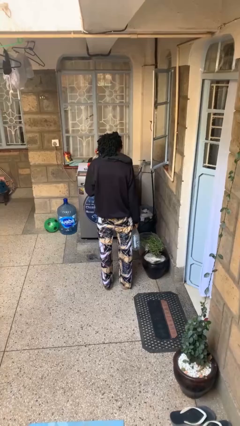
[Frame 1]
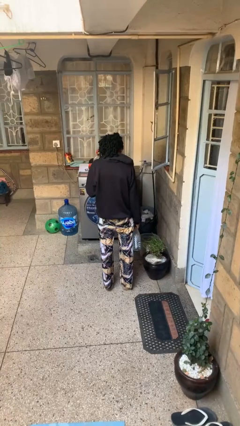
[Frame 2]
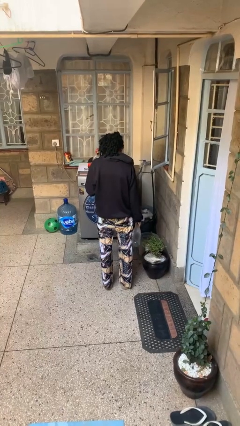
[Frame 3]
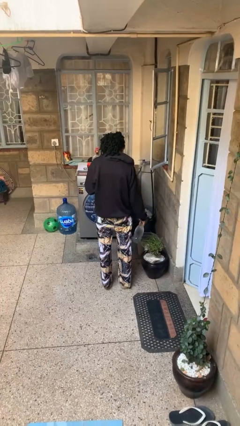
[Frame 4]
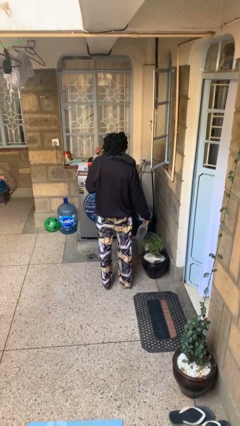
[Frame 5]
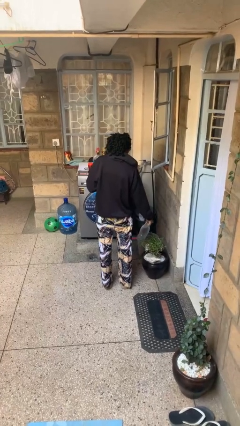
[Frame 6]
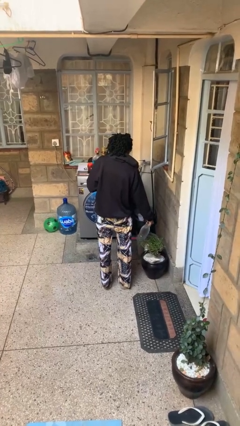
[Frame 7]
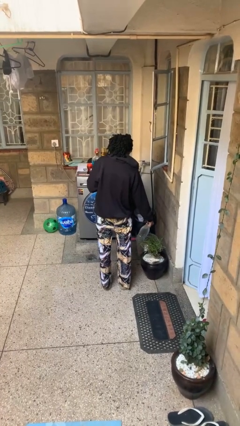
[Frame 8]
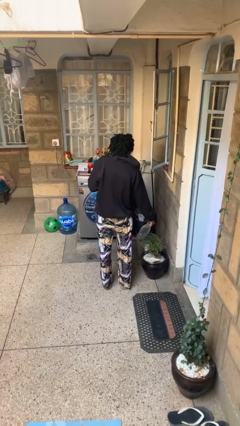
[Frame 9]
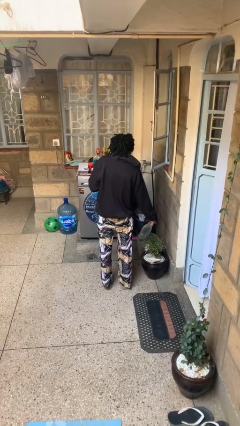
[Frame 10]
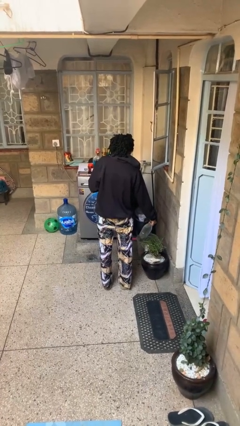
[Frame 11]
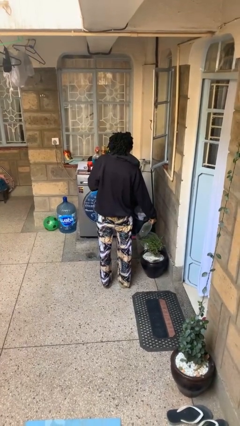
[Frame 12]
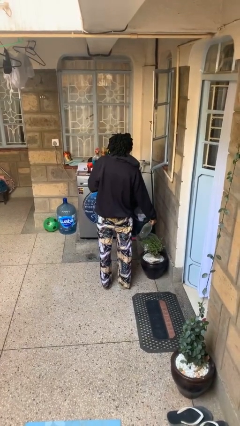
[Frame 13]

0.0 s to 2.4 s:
person waters houseplant

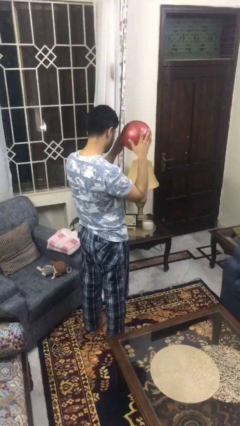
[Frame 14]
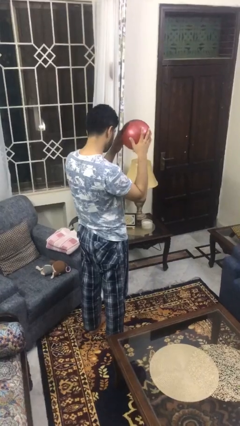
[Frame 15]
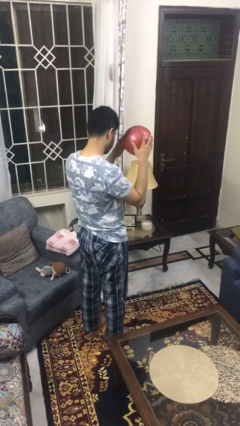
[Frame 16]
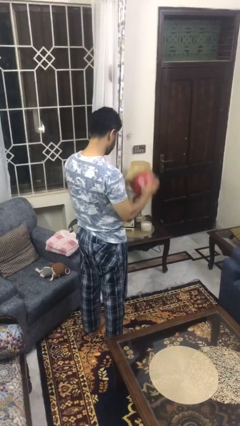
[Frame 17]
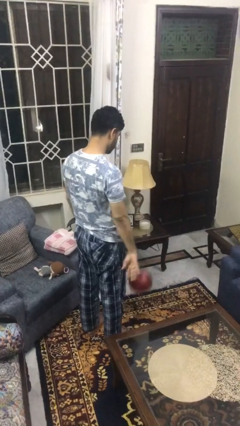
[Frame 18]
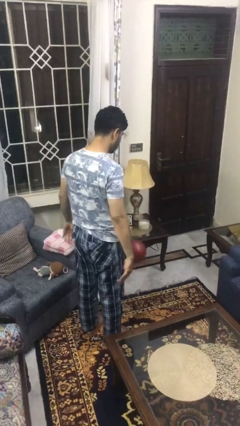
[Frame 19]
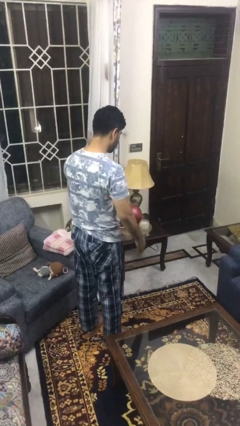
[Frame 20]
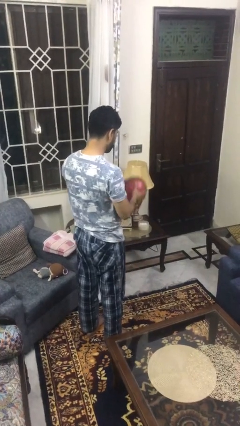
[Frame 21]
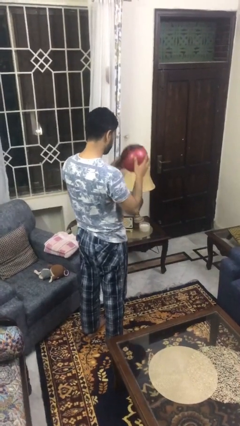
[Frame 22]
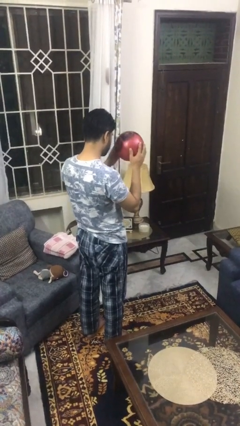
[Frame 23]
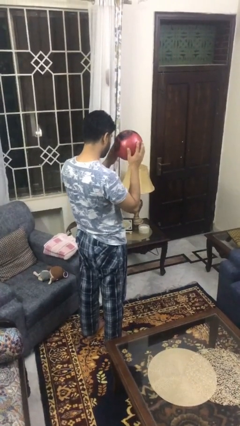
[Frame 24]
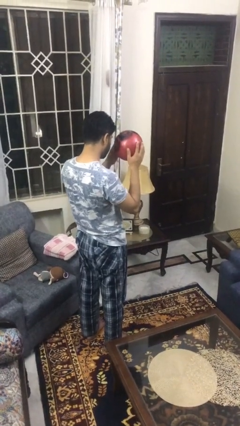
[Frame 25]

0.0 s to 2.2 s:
person bounces ball on floor

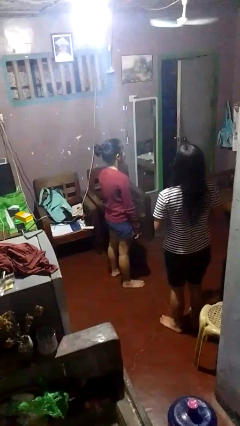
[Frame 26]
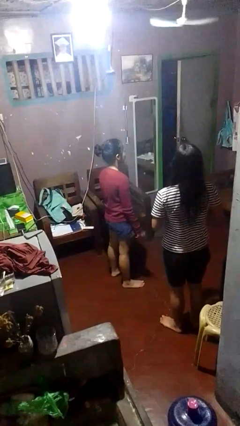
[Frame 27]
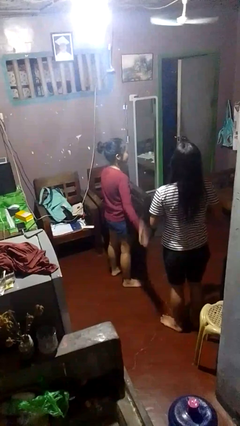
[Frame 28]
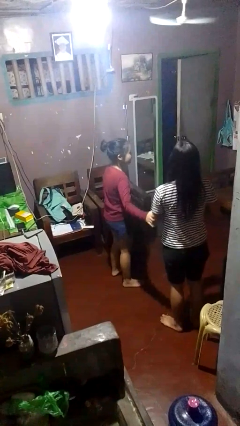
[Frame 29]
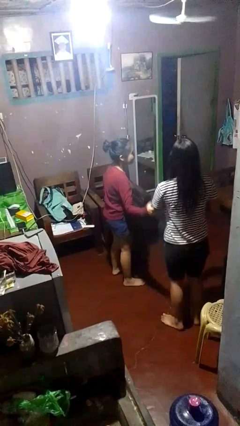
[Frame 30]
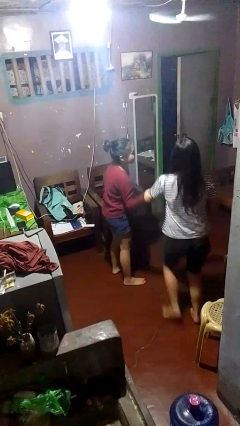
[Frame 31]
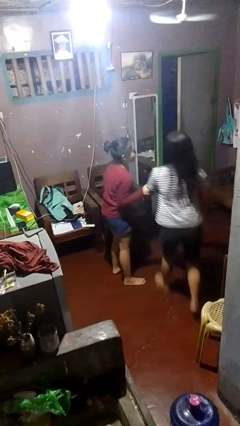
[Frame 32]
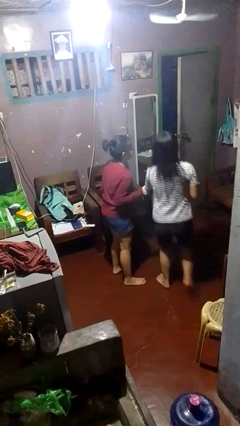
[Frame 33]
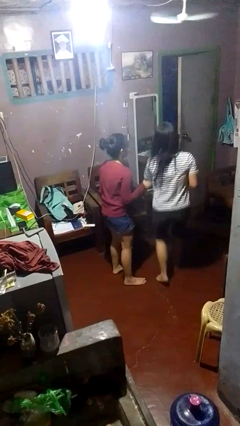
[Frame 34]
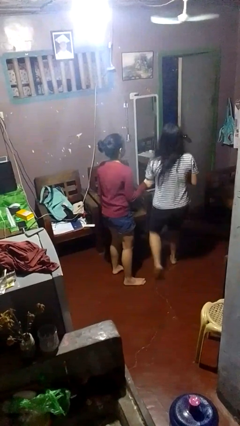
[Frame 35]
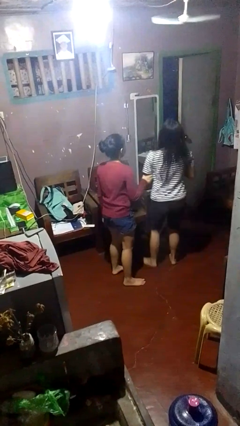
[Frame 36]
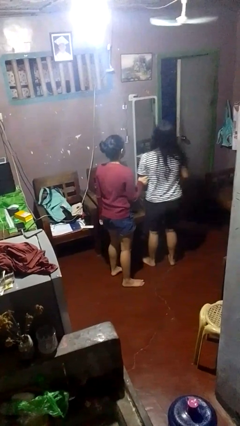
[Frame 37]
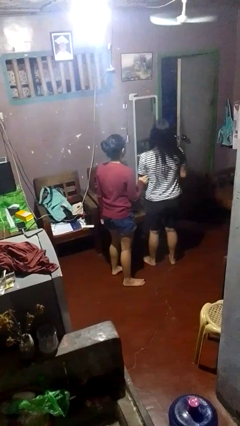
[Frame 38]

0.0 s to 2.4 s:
person grabs person by bicep

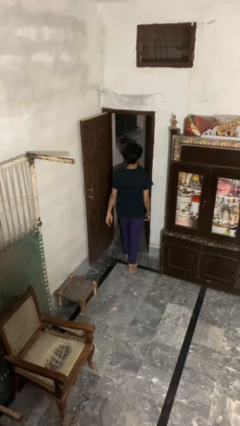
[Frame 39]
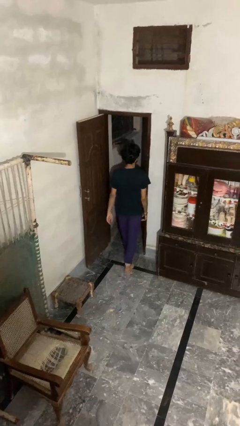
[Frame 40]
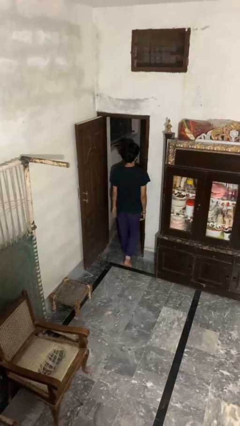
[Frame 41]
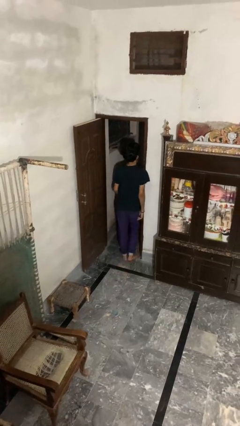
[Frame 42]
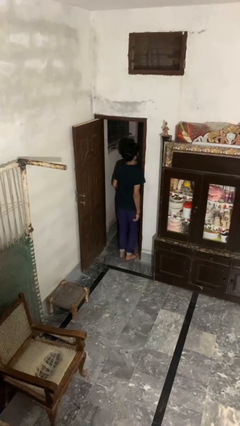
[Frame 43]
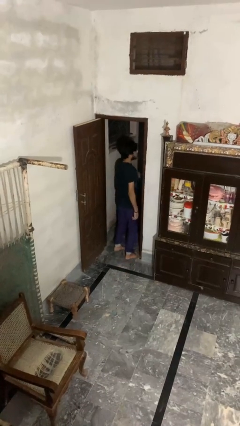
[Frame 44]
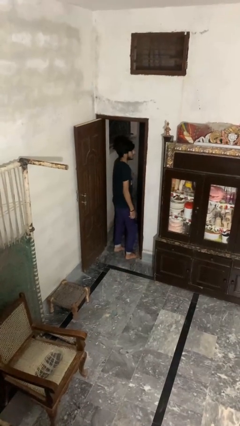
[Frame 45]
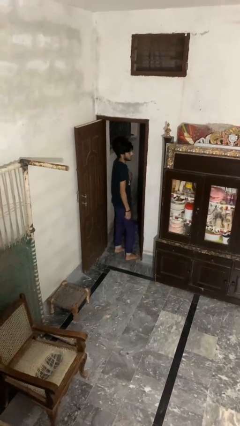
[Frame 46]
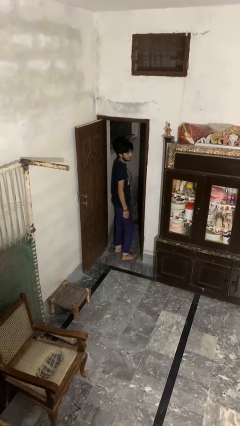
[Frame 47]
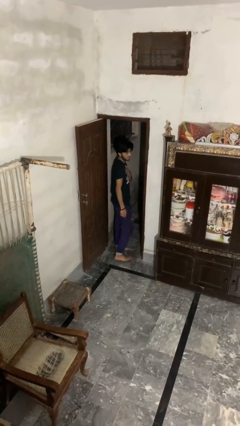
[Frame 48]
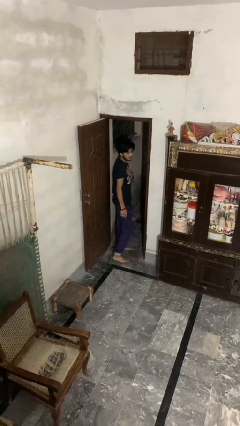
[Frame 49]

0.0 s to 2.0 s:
person bumps into wall

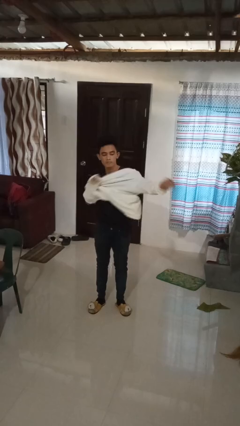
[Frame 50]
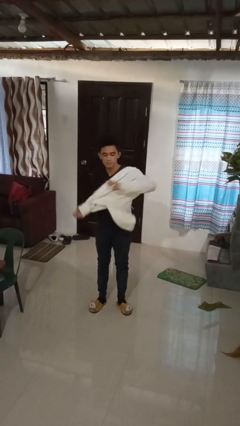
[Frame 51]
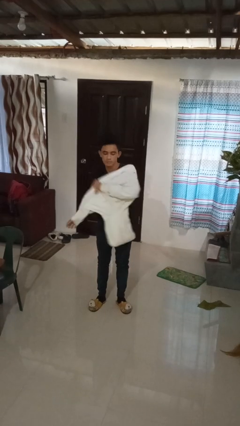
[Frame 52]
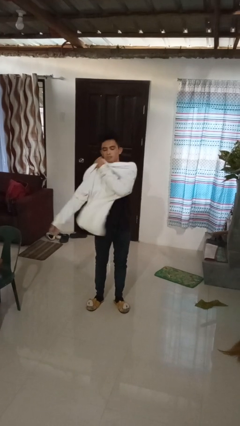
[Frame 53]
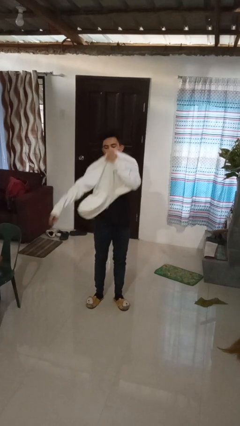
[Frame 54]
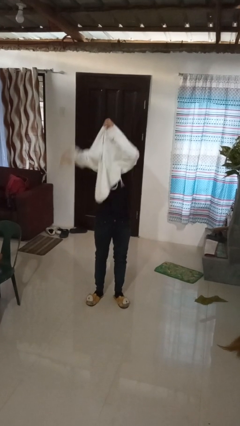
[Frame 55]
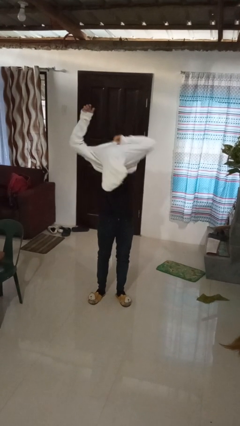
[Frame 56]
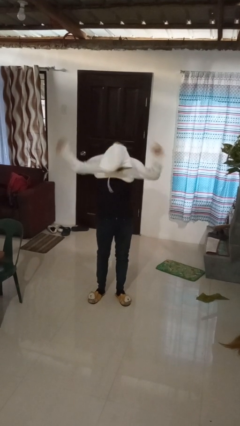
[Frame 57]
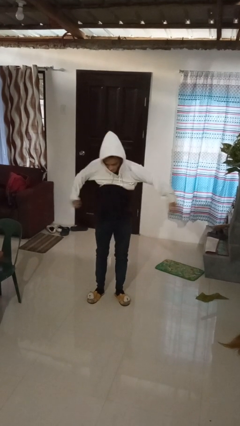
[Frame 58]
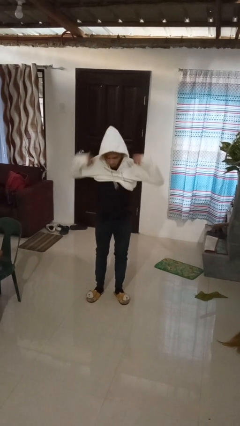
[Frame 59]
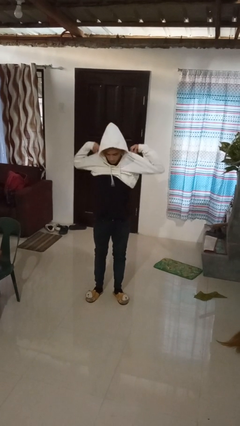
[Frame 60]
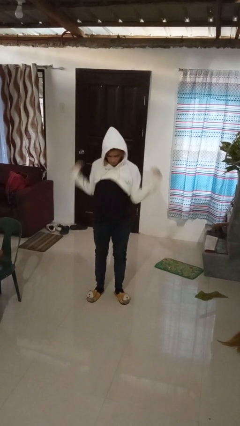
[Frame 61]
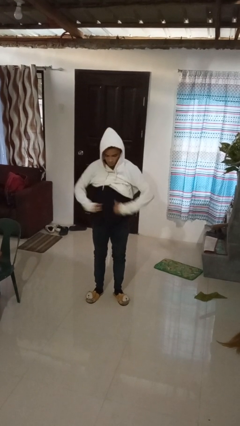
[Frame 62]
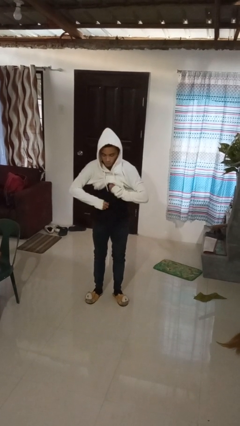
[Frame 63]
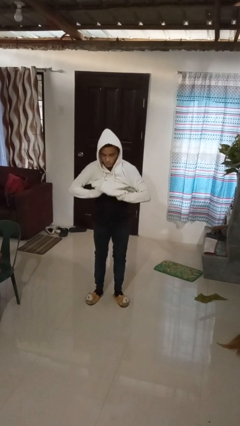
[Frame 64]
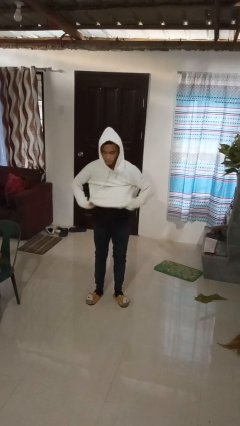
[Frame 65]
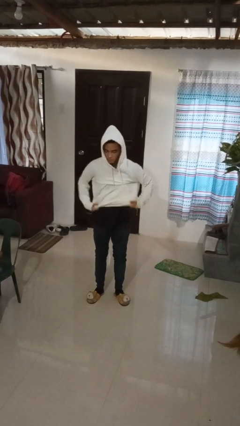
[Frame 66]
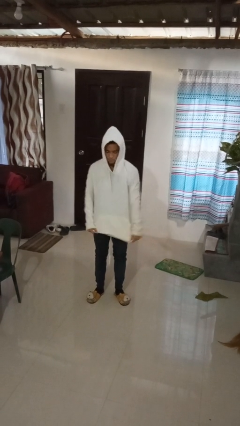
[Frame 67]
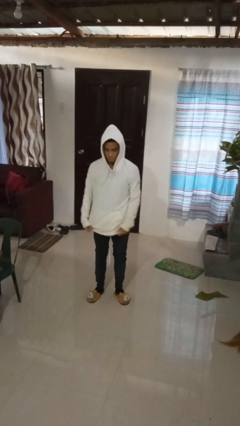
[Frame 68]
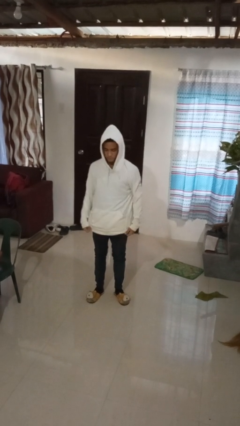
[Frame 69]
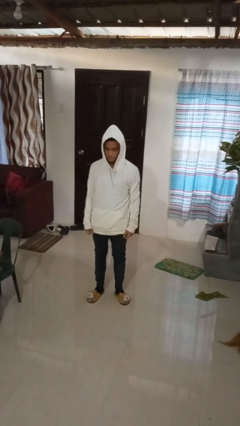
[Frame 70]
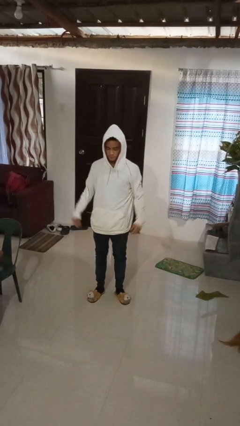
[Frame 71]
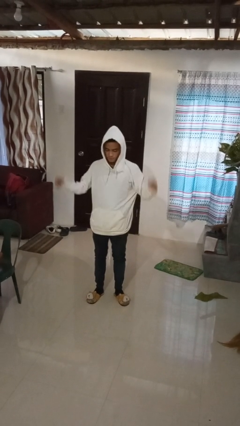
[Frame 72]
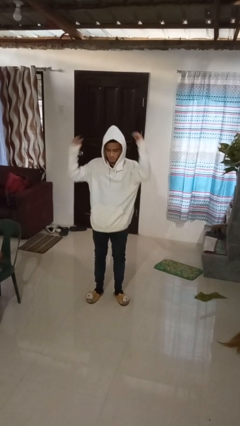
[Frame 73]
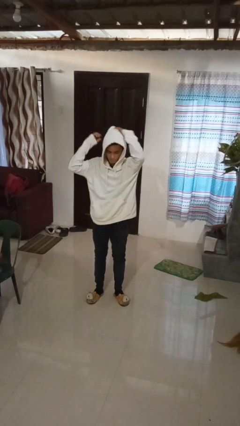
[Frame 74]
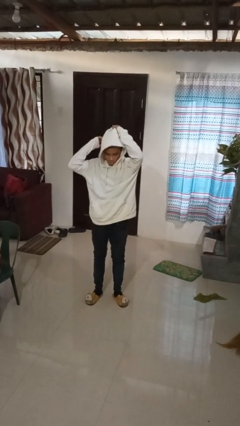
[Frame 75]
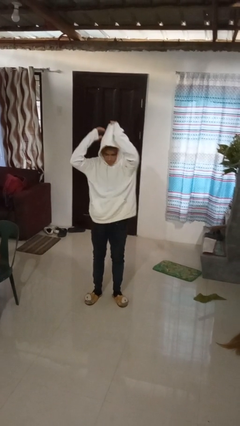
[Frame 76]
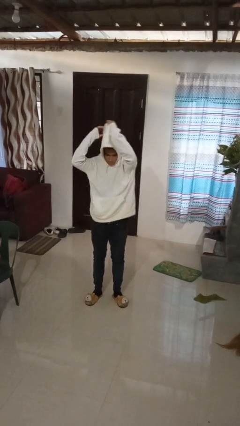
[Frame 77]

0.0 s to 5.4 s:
person puts on hoodie

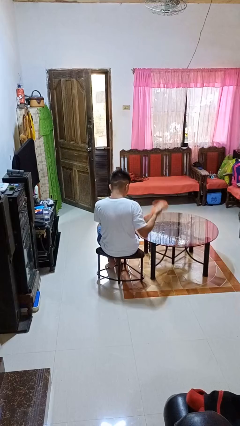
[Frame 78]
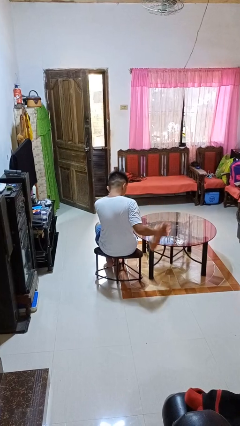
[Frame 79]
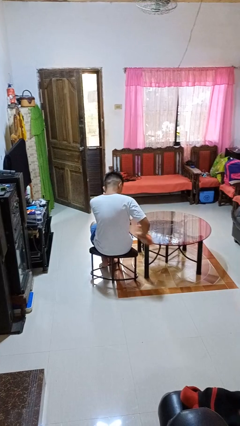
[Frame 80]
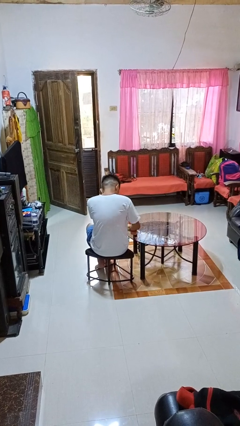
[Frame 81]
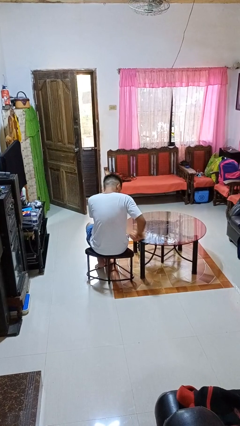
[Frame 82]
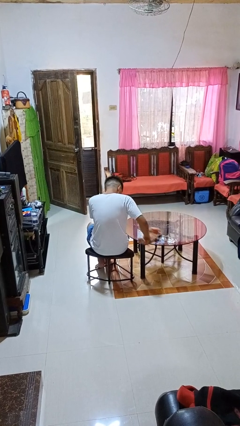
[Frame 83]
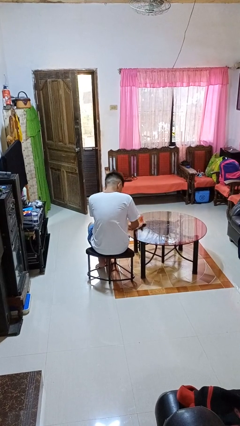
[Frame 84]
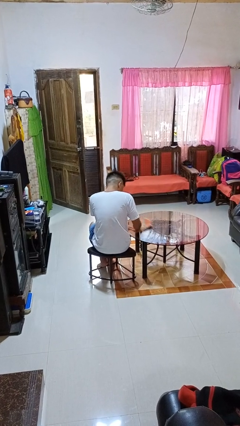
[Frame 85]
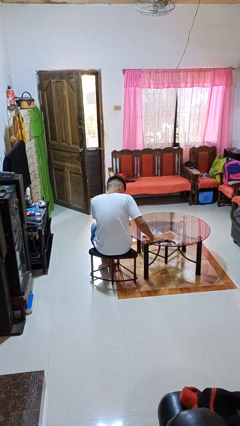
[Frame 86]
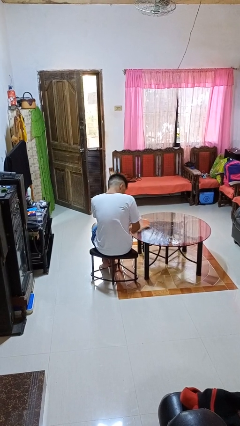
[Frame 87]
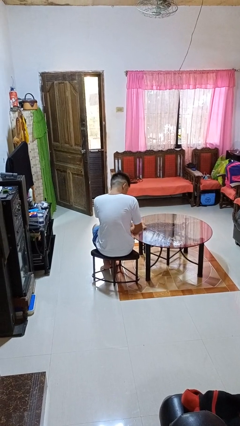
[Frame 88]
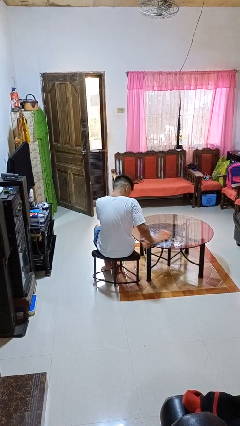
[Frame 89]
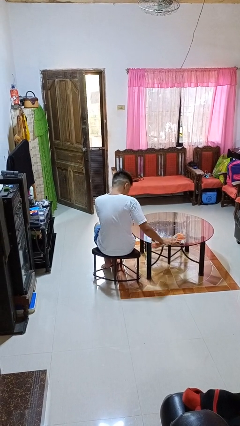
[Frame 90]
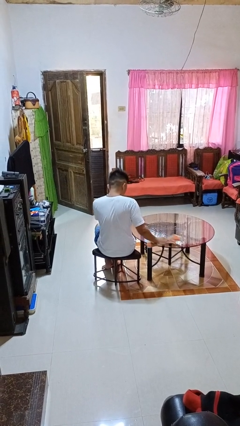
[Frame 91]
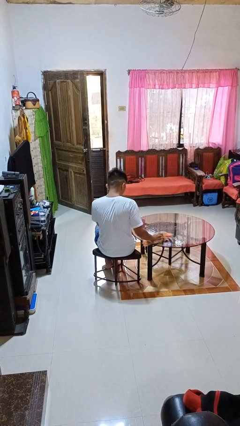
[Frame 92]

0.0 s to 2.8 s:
person cleans table with rag

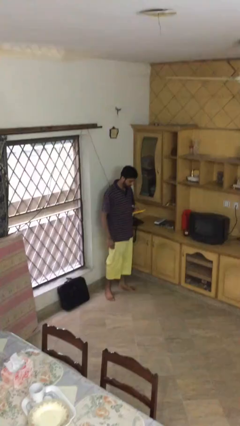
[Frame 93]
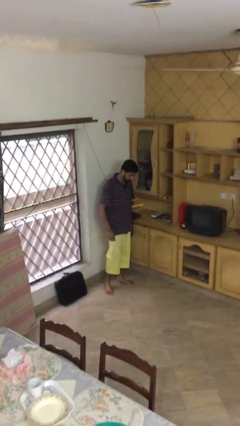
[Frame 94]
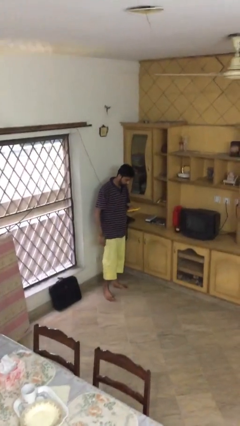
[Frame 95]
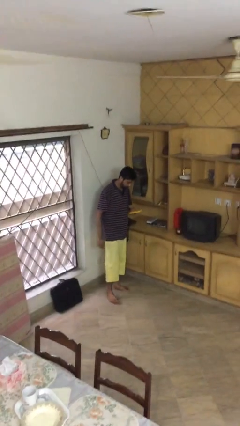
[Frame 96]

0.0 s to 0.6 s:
person texts on phone
